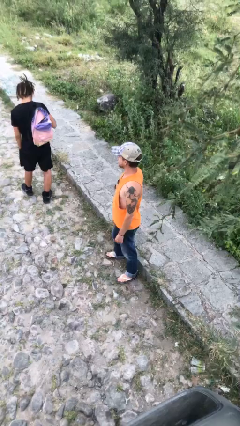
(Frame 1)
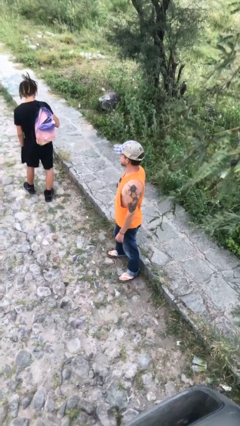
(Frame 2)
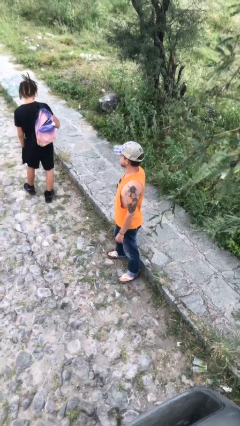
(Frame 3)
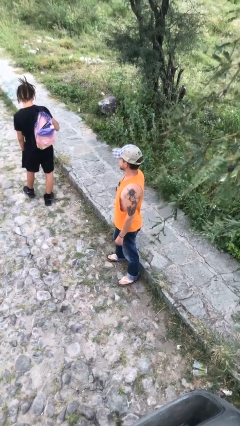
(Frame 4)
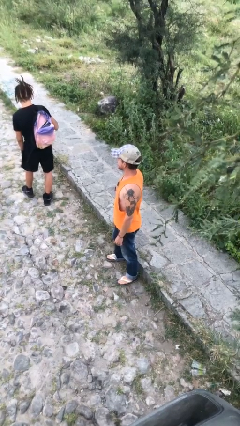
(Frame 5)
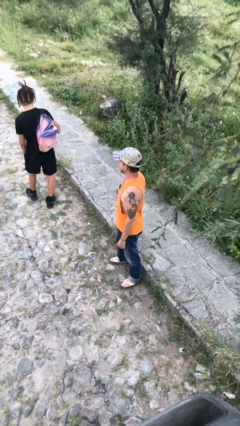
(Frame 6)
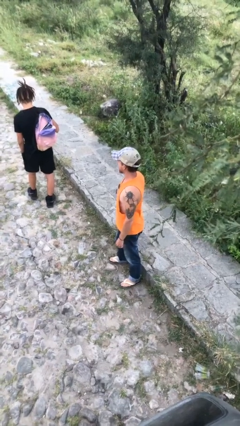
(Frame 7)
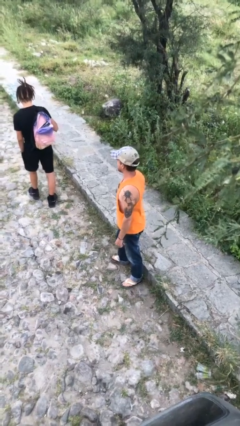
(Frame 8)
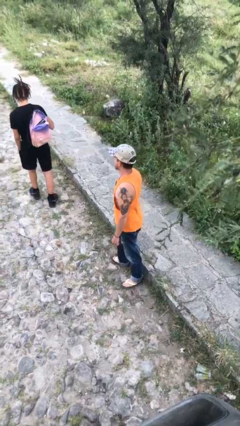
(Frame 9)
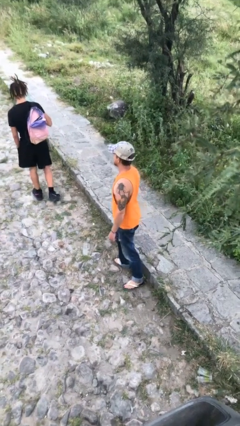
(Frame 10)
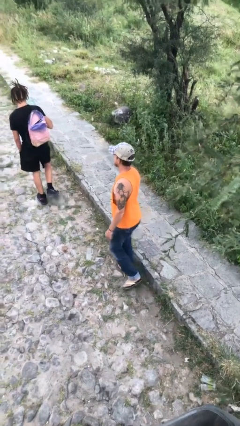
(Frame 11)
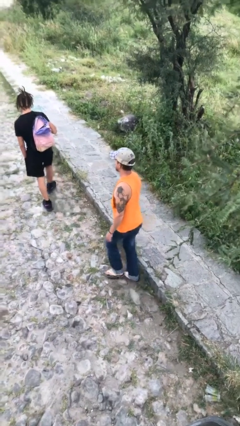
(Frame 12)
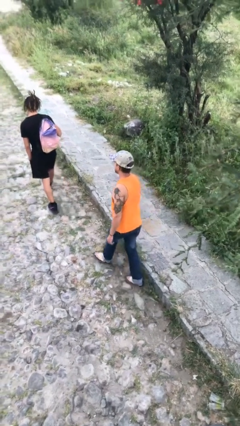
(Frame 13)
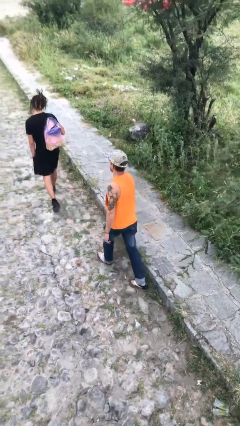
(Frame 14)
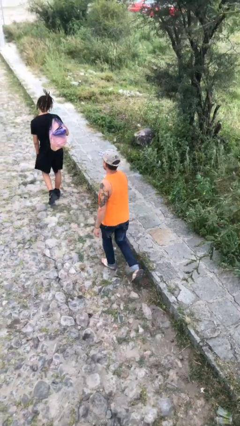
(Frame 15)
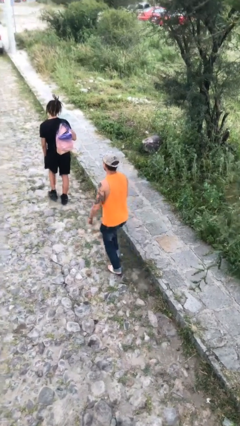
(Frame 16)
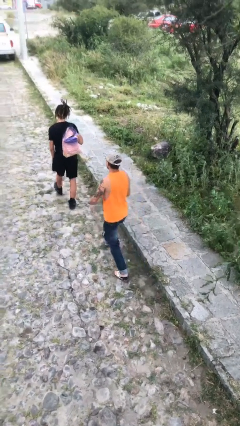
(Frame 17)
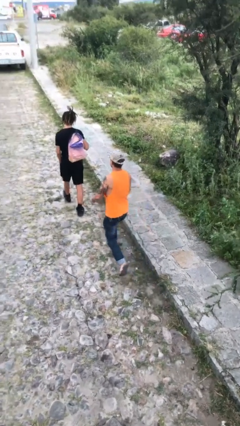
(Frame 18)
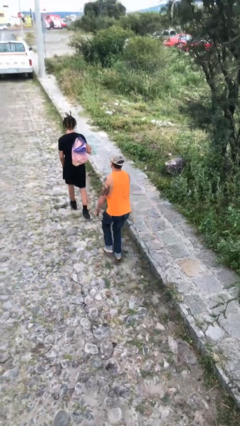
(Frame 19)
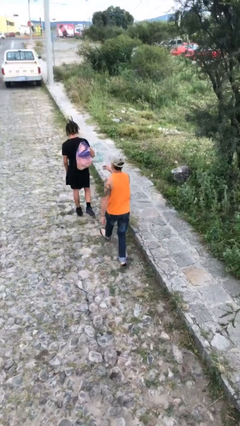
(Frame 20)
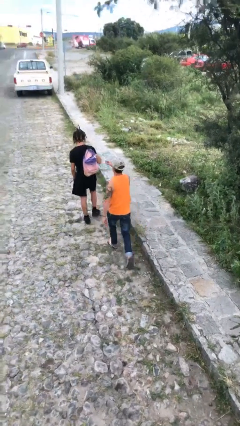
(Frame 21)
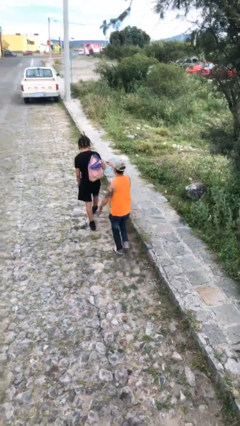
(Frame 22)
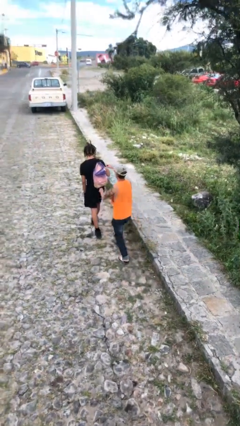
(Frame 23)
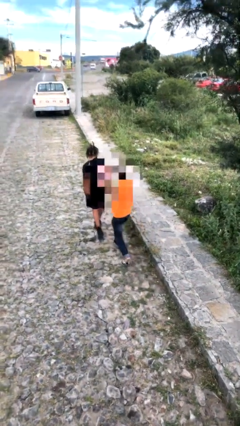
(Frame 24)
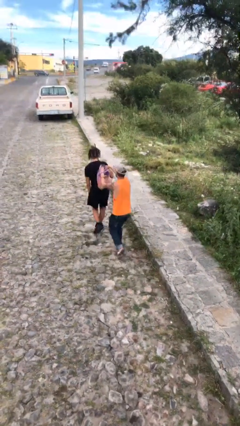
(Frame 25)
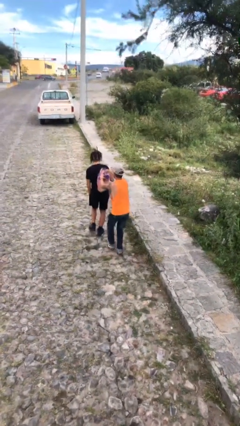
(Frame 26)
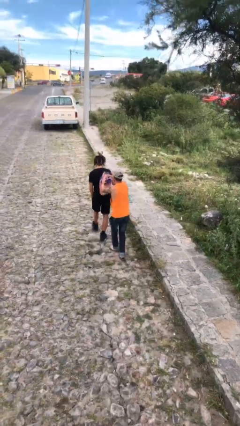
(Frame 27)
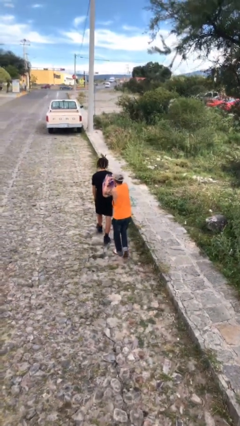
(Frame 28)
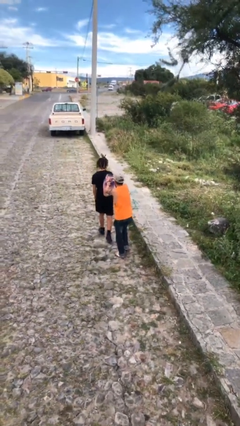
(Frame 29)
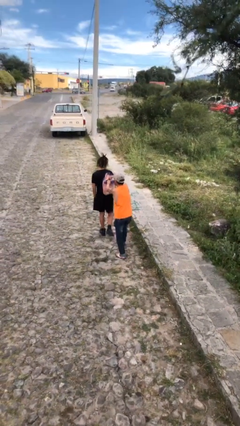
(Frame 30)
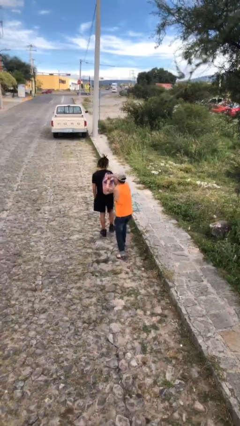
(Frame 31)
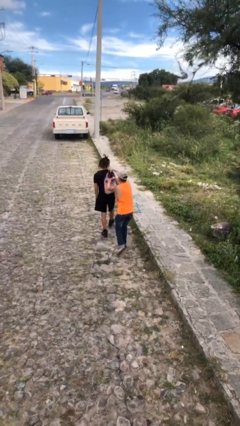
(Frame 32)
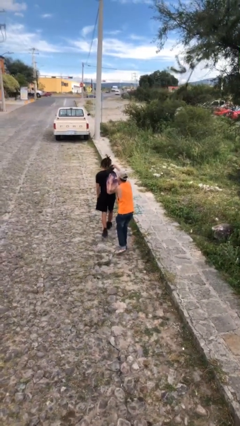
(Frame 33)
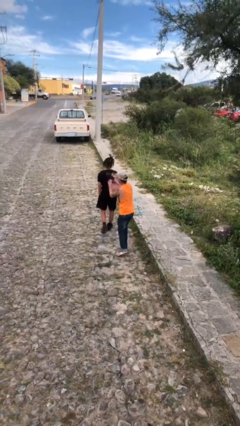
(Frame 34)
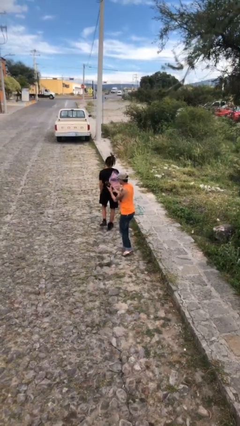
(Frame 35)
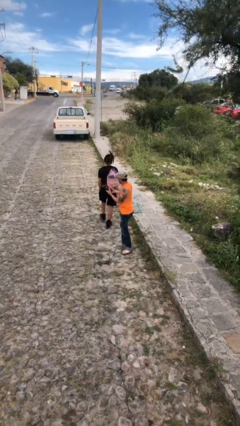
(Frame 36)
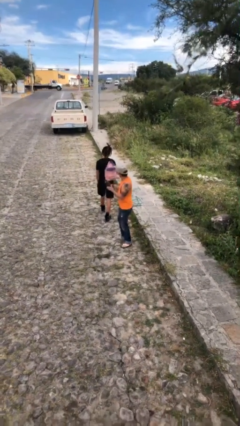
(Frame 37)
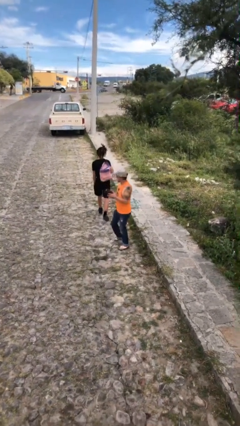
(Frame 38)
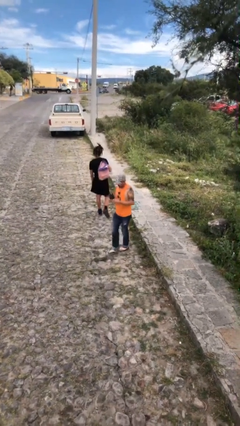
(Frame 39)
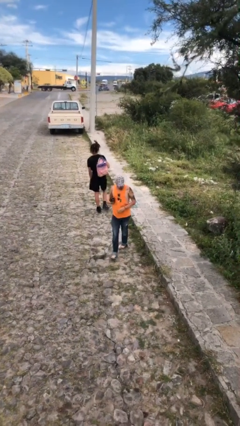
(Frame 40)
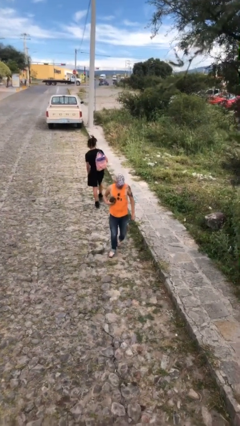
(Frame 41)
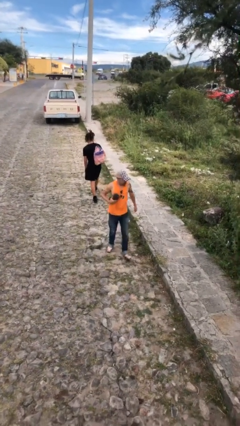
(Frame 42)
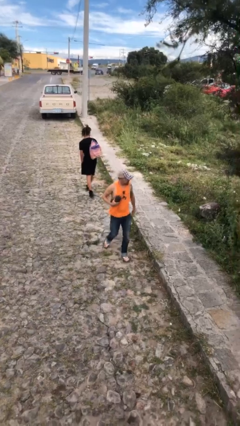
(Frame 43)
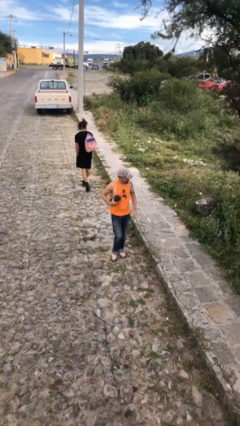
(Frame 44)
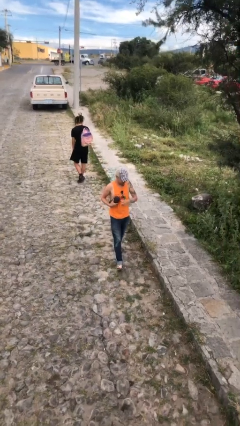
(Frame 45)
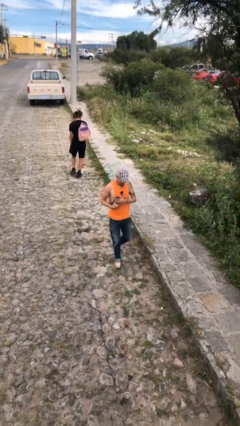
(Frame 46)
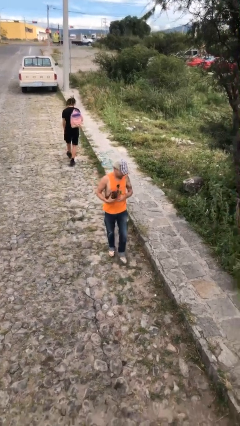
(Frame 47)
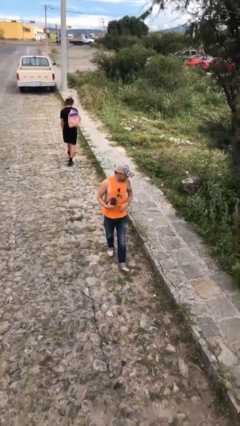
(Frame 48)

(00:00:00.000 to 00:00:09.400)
person steals object from person

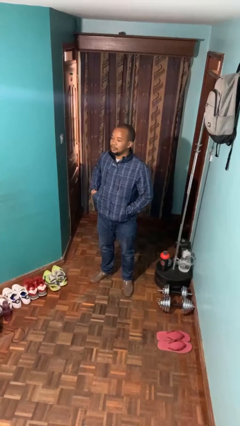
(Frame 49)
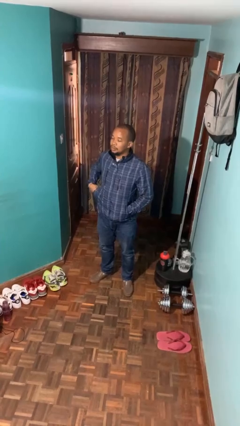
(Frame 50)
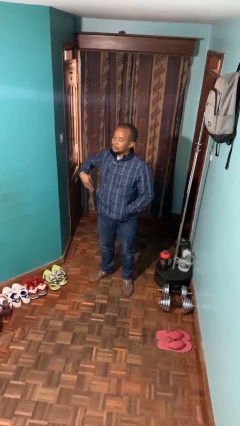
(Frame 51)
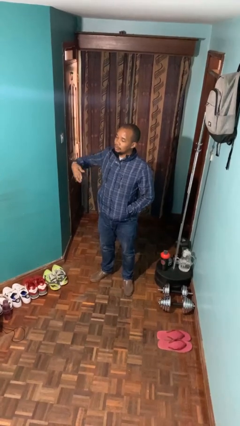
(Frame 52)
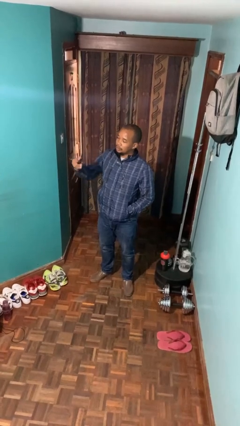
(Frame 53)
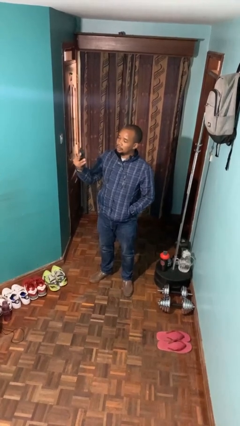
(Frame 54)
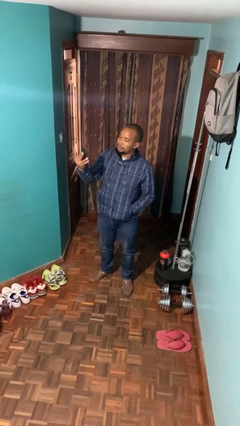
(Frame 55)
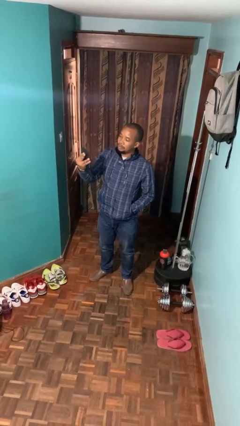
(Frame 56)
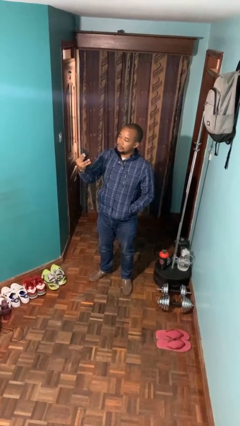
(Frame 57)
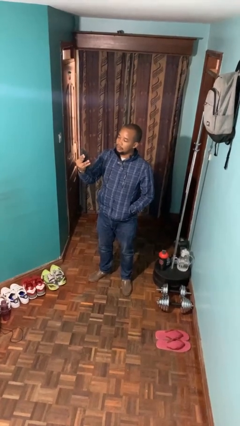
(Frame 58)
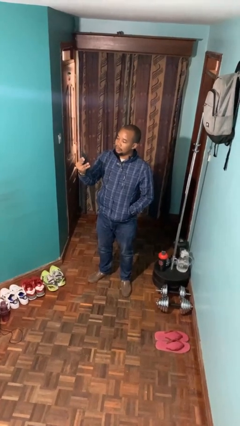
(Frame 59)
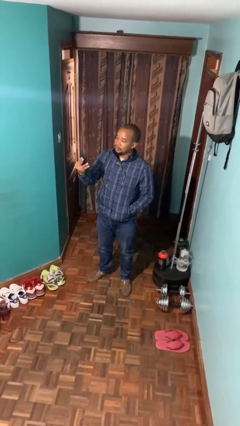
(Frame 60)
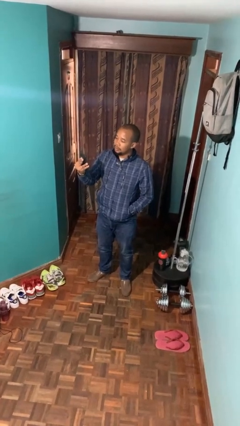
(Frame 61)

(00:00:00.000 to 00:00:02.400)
person takes phone from pocket

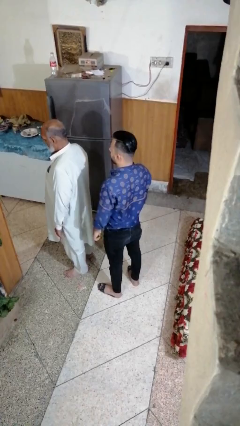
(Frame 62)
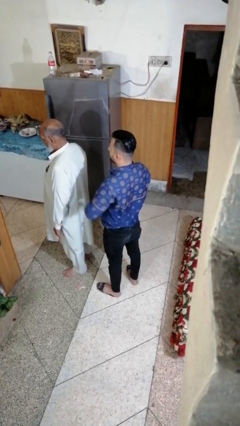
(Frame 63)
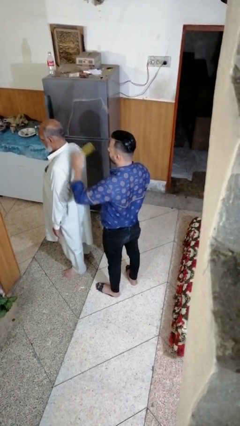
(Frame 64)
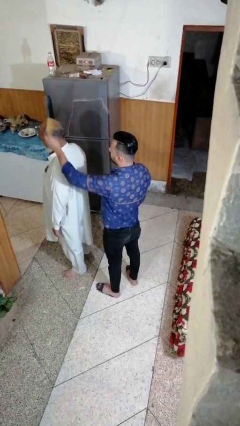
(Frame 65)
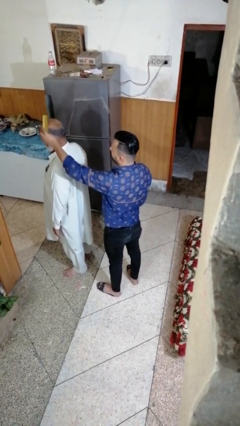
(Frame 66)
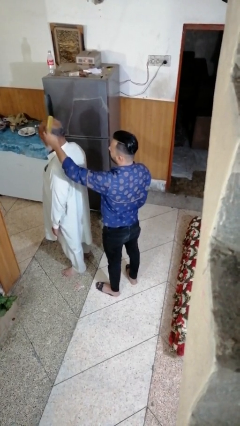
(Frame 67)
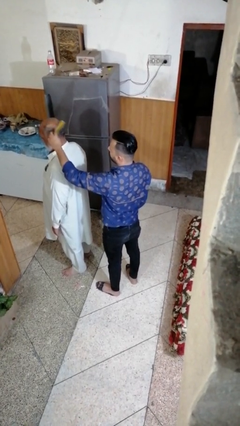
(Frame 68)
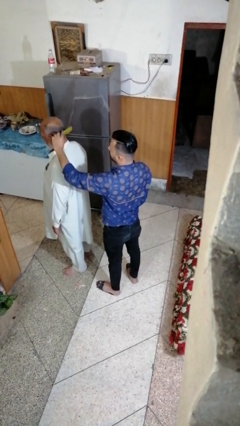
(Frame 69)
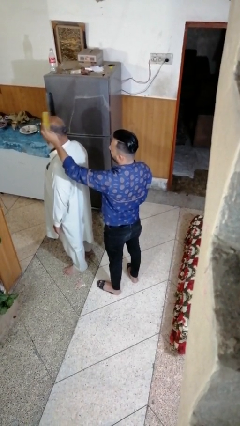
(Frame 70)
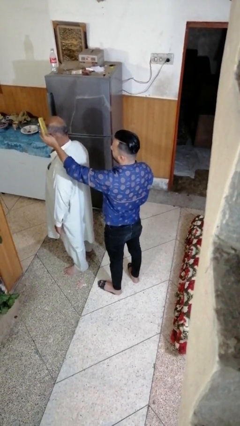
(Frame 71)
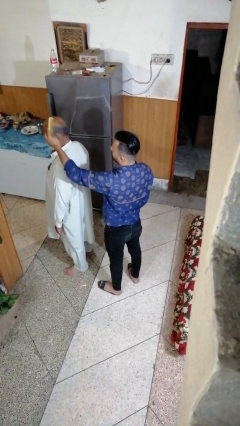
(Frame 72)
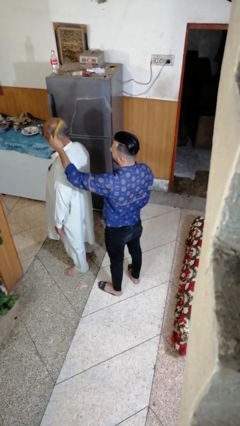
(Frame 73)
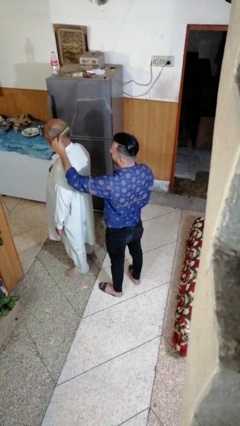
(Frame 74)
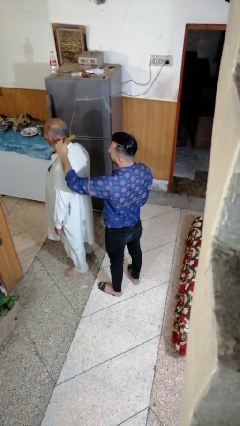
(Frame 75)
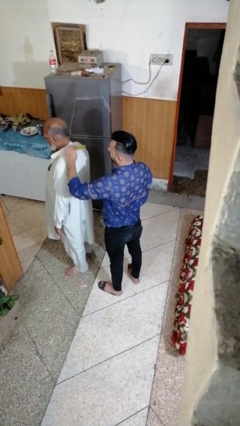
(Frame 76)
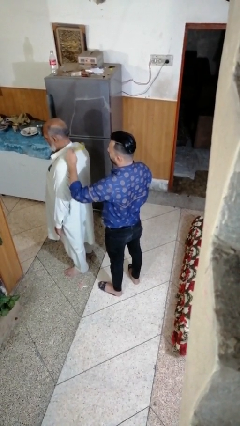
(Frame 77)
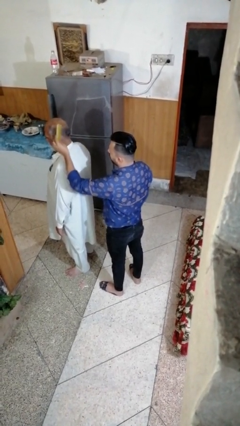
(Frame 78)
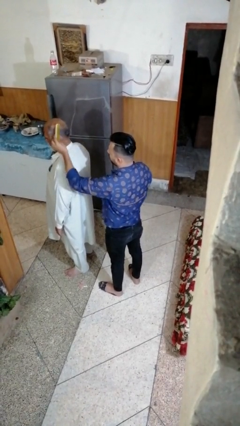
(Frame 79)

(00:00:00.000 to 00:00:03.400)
person brushes hair of person

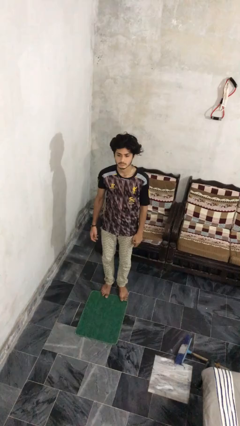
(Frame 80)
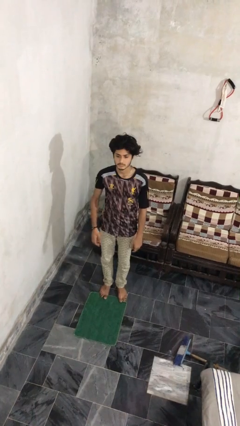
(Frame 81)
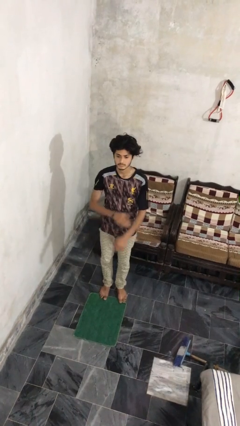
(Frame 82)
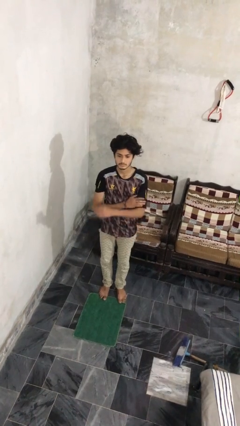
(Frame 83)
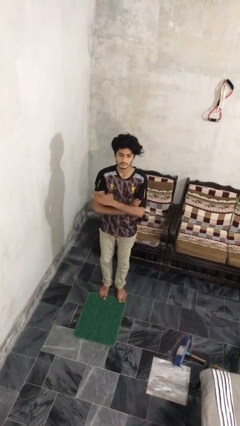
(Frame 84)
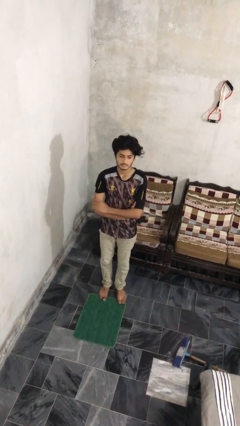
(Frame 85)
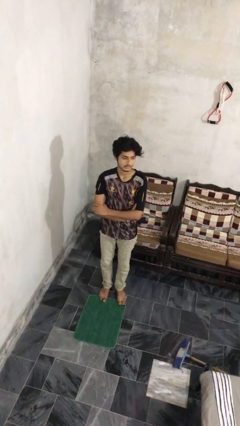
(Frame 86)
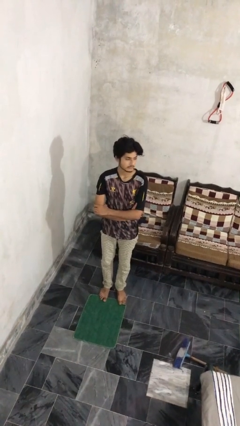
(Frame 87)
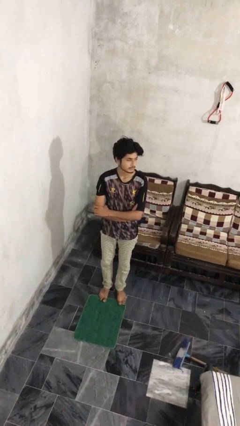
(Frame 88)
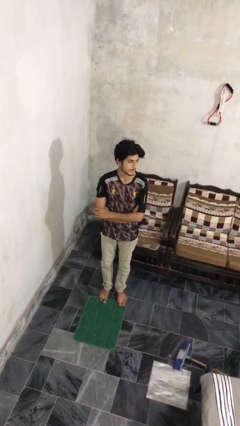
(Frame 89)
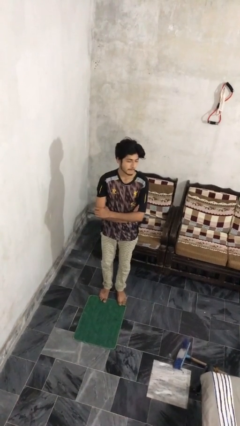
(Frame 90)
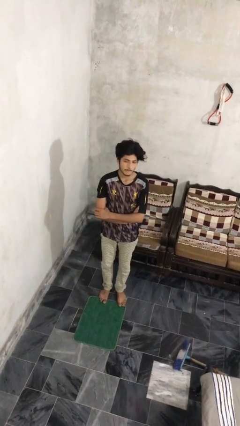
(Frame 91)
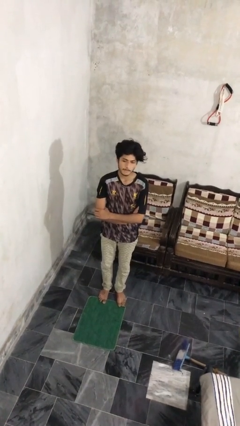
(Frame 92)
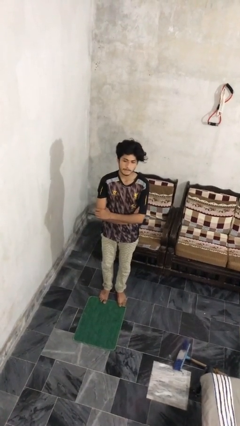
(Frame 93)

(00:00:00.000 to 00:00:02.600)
person crosses arms
